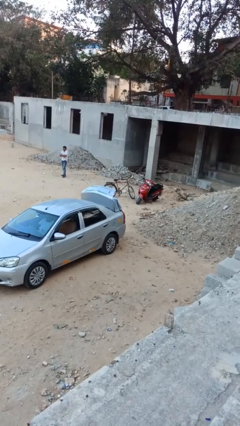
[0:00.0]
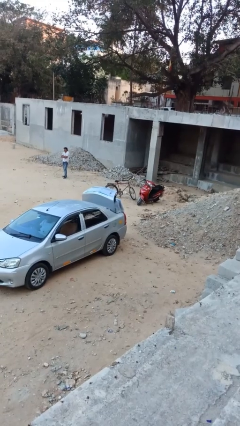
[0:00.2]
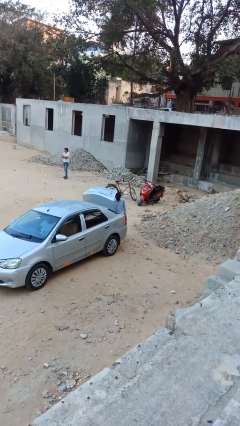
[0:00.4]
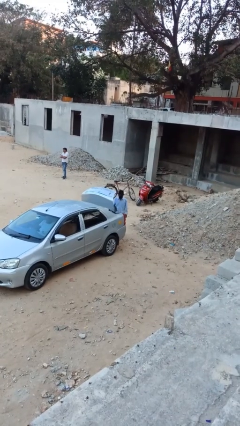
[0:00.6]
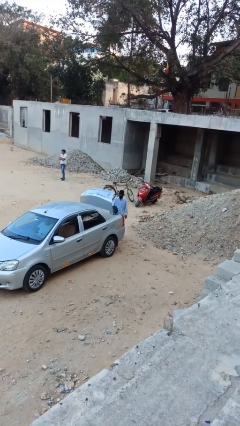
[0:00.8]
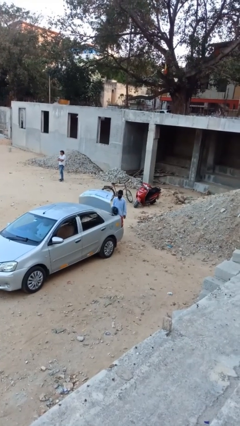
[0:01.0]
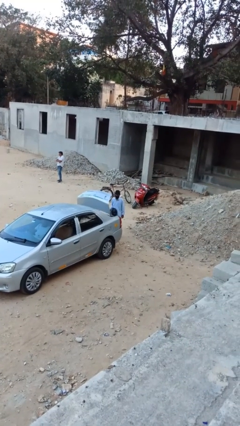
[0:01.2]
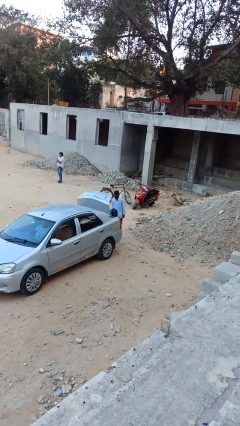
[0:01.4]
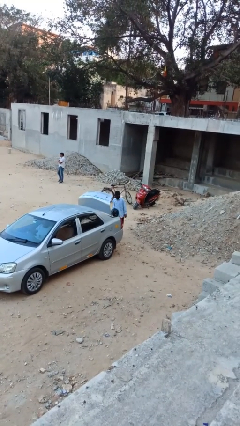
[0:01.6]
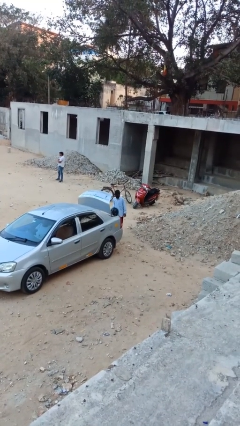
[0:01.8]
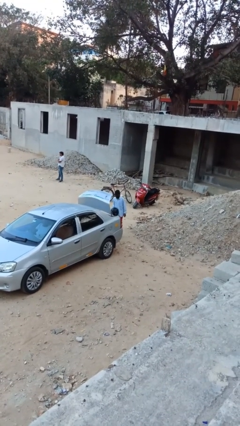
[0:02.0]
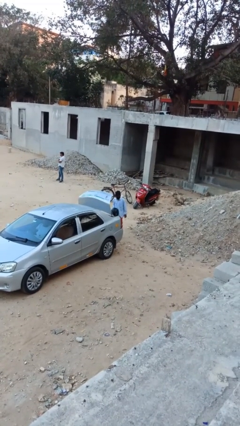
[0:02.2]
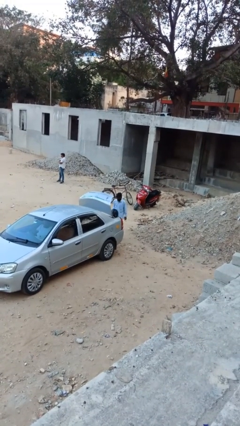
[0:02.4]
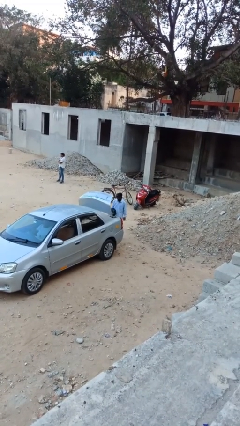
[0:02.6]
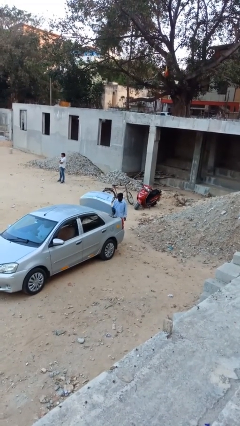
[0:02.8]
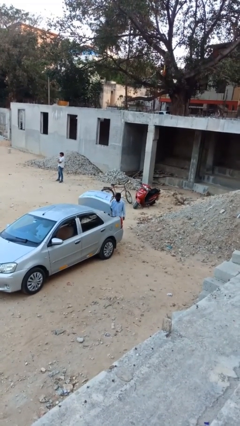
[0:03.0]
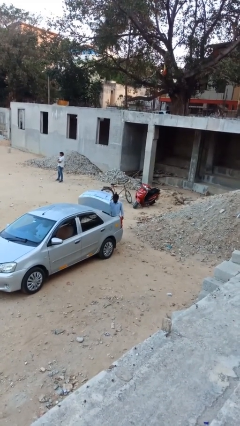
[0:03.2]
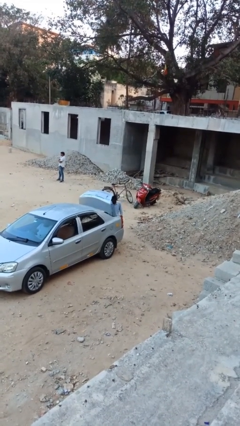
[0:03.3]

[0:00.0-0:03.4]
person unloads car

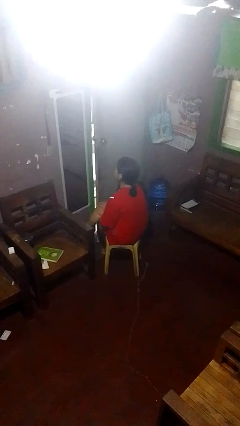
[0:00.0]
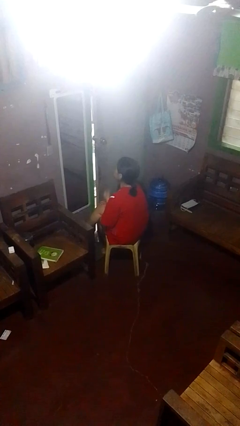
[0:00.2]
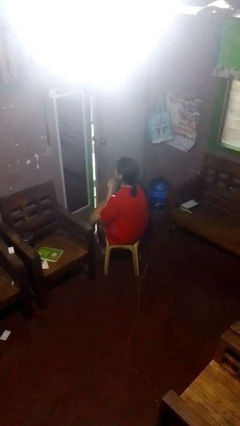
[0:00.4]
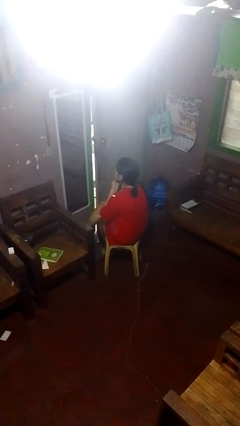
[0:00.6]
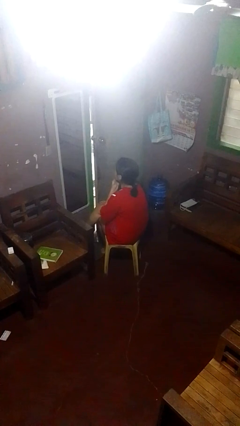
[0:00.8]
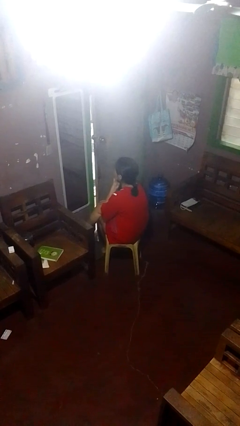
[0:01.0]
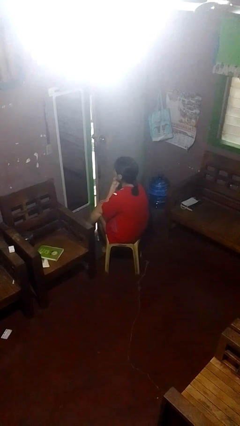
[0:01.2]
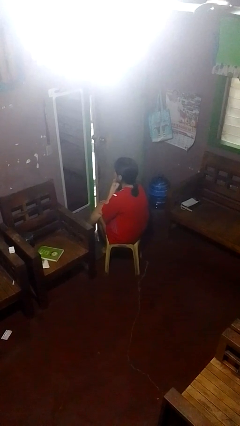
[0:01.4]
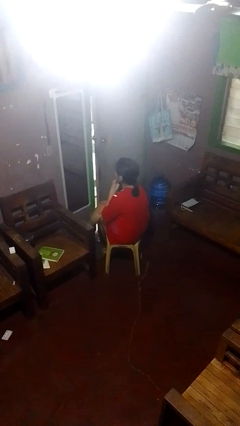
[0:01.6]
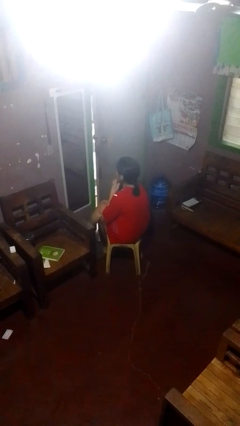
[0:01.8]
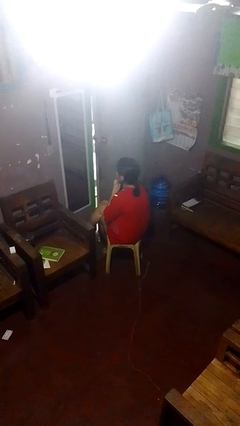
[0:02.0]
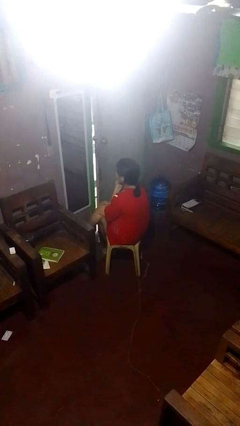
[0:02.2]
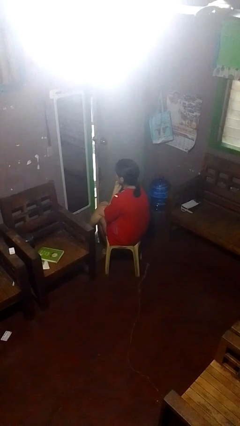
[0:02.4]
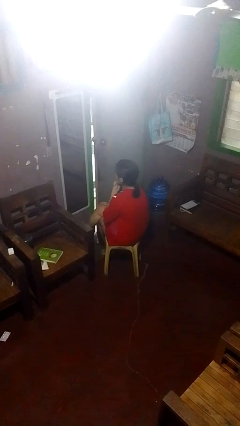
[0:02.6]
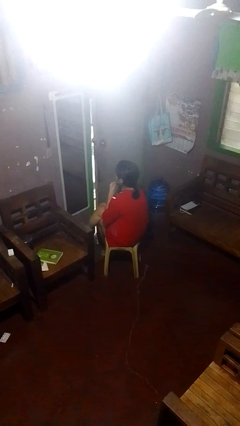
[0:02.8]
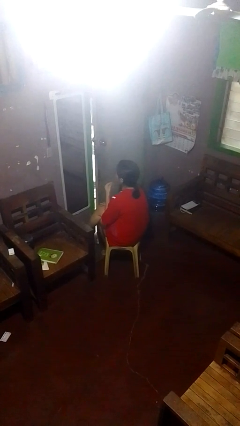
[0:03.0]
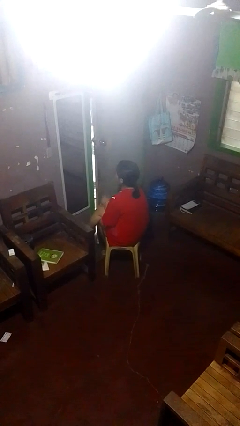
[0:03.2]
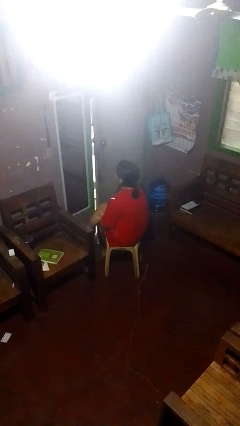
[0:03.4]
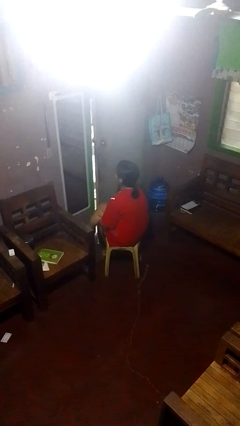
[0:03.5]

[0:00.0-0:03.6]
person strokes chin

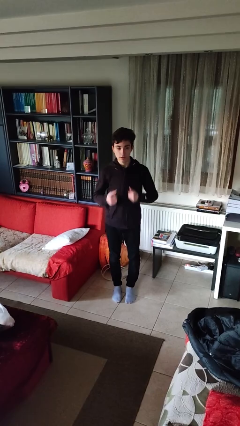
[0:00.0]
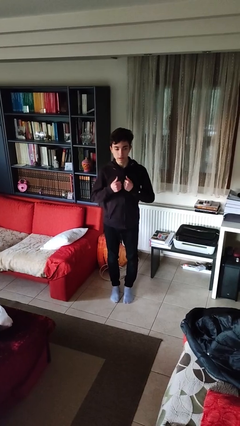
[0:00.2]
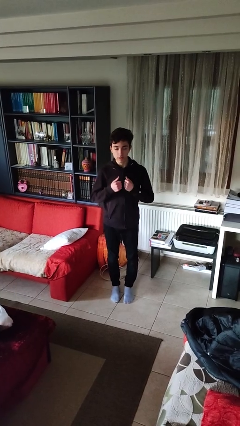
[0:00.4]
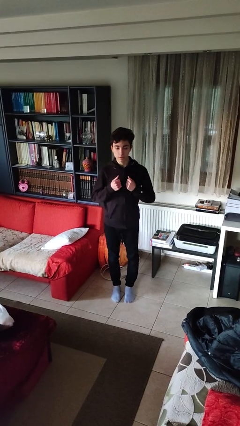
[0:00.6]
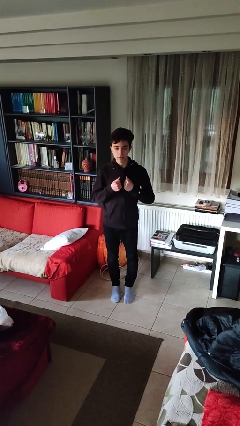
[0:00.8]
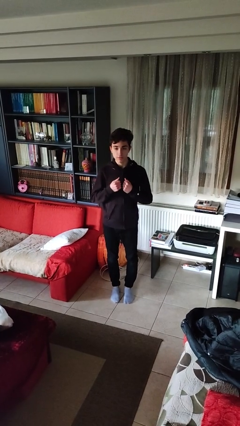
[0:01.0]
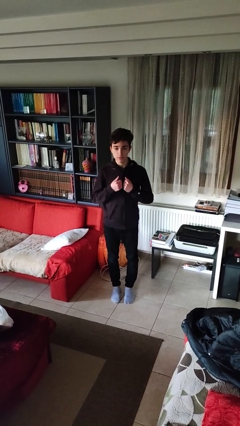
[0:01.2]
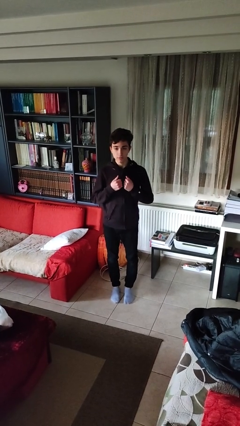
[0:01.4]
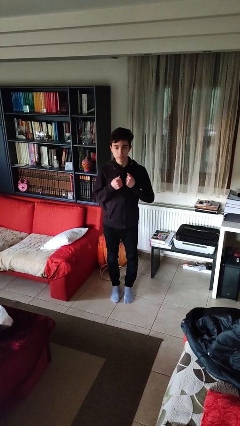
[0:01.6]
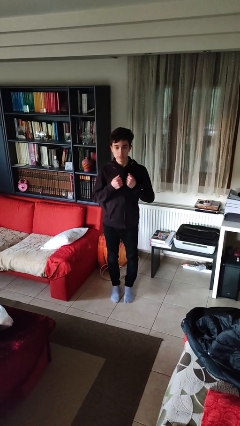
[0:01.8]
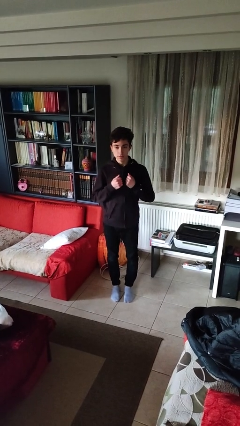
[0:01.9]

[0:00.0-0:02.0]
person drums on chest

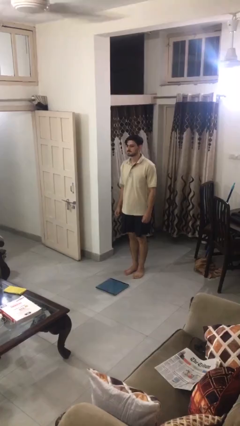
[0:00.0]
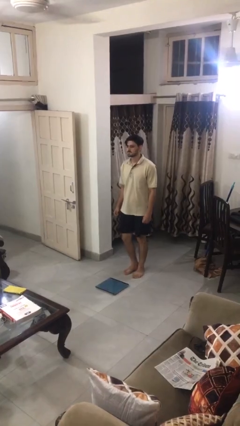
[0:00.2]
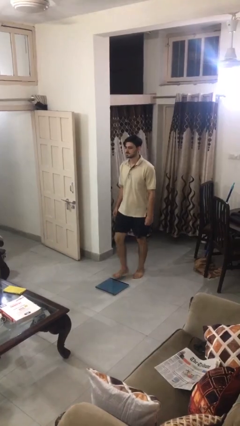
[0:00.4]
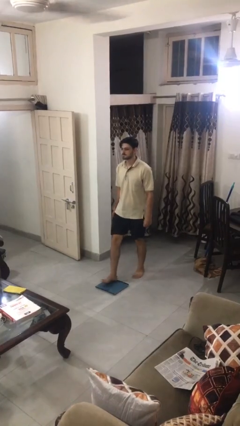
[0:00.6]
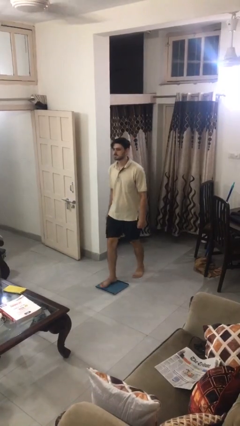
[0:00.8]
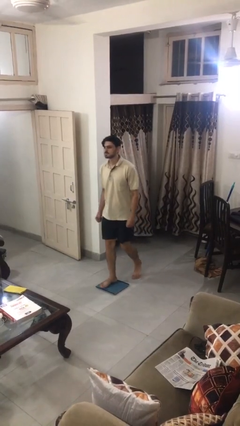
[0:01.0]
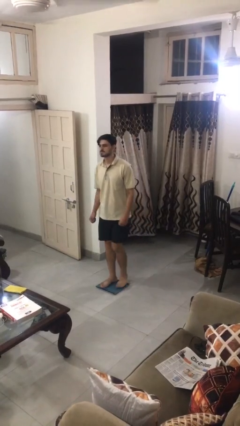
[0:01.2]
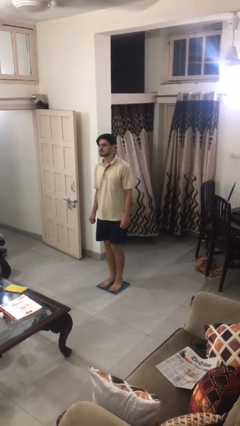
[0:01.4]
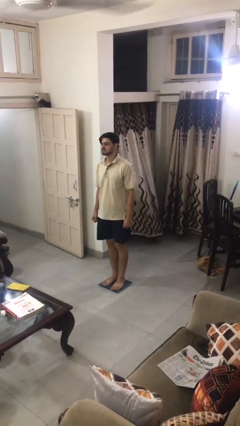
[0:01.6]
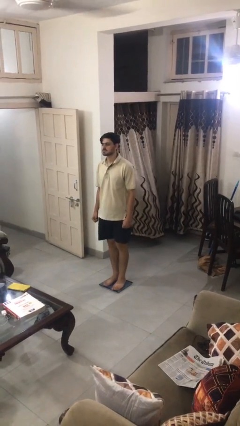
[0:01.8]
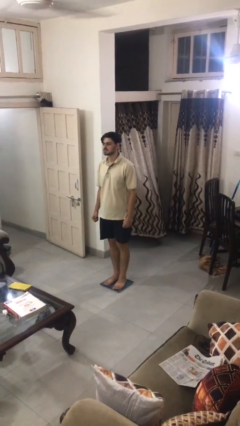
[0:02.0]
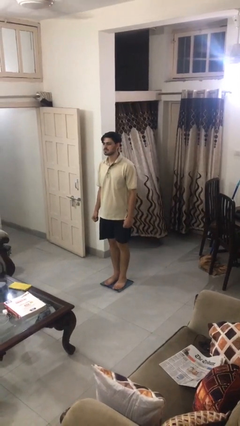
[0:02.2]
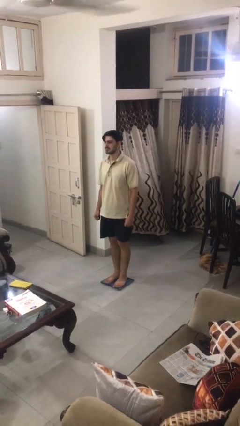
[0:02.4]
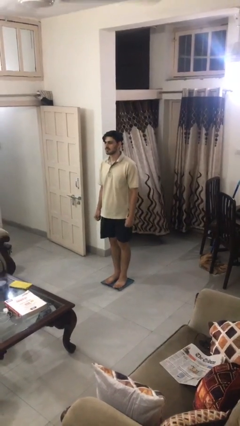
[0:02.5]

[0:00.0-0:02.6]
person uses bodyweight scale

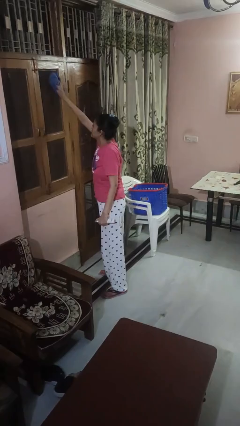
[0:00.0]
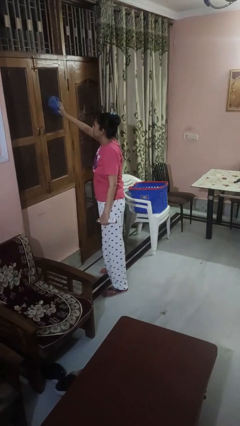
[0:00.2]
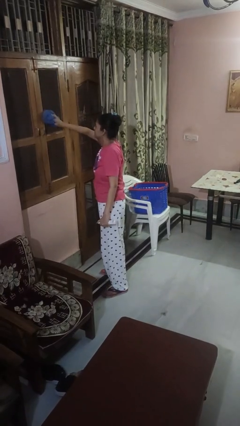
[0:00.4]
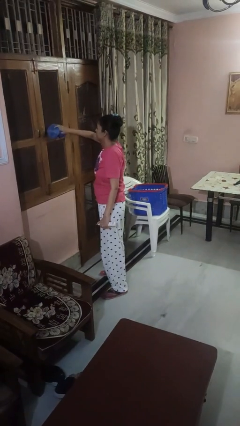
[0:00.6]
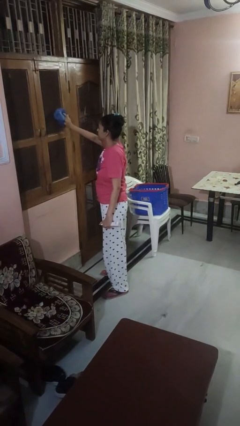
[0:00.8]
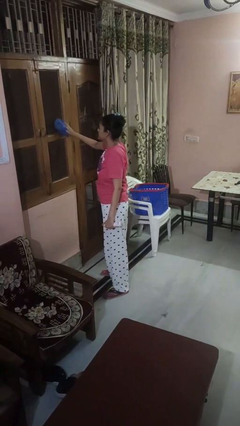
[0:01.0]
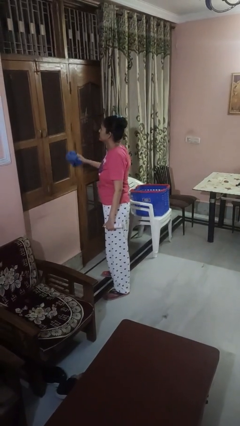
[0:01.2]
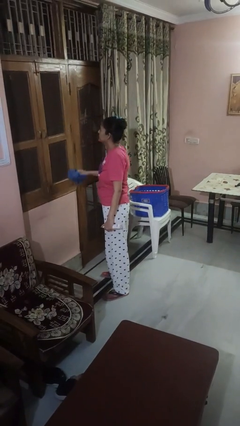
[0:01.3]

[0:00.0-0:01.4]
person washes window

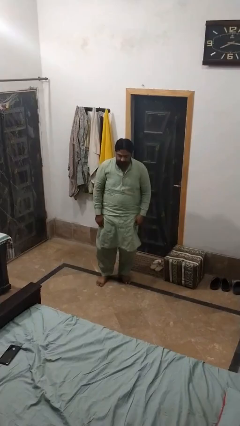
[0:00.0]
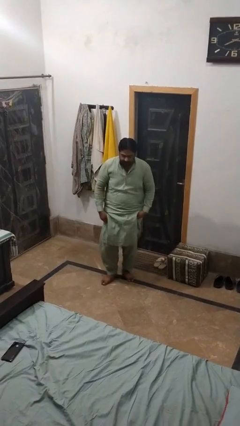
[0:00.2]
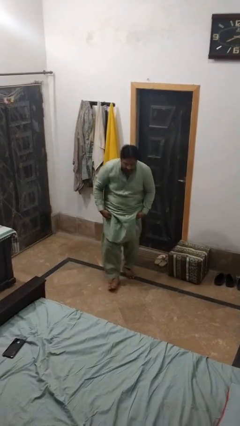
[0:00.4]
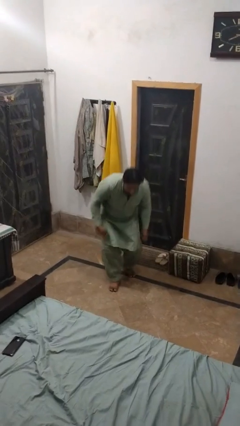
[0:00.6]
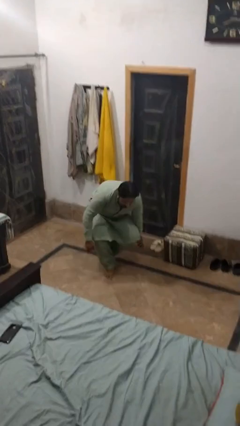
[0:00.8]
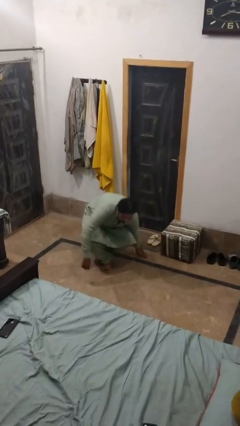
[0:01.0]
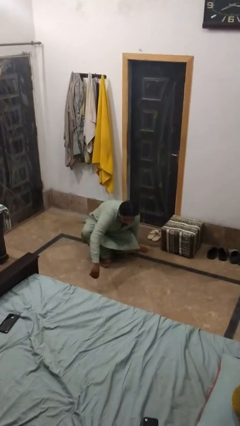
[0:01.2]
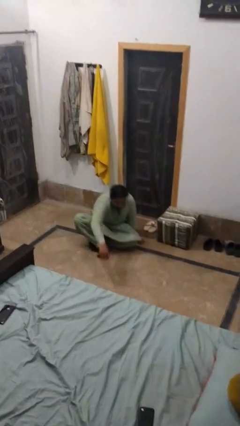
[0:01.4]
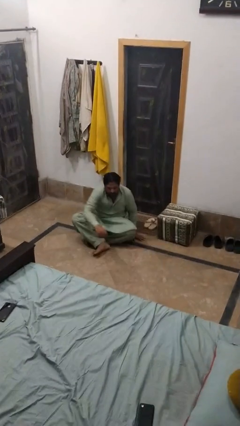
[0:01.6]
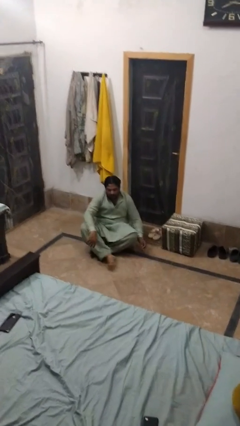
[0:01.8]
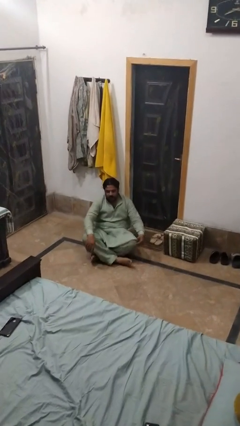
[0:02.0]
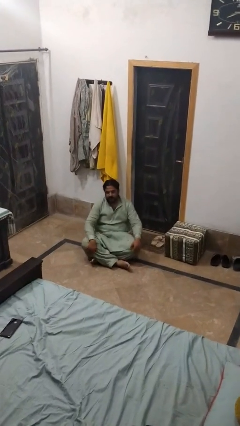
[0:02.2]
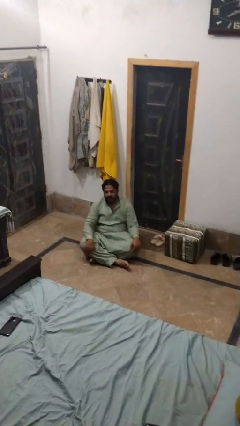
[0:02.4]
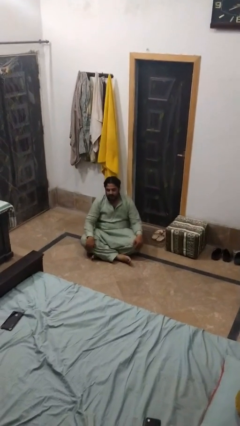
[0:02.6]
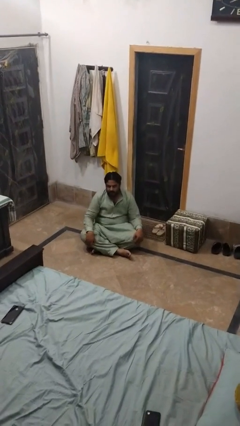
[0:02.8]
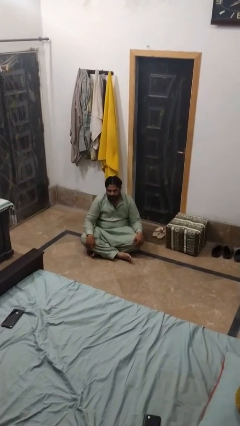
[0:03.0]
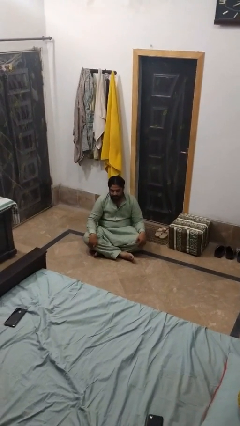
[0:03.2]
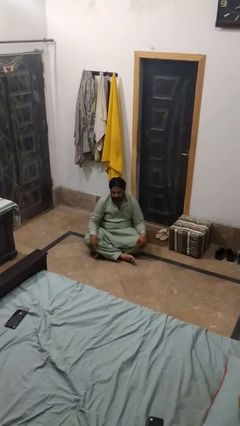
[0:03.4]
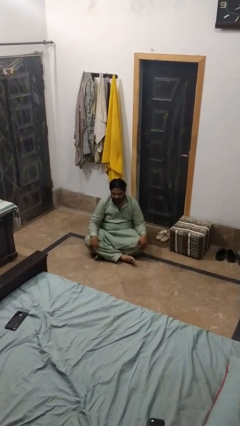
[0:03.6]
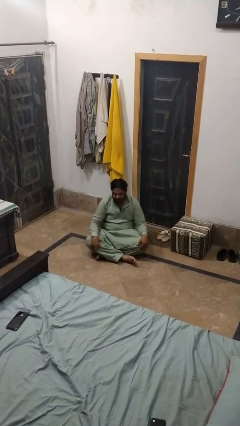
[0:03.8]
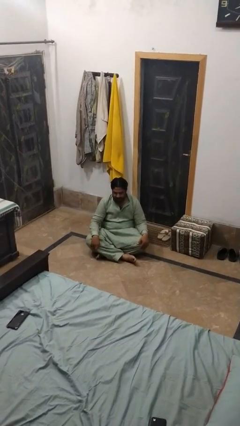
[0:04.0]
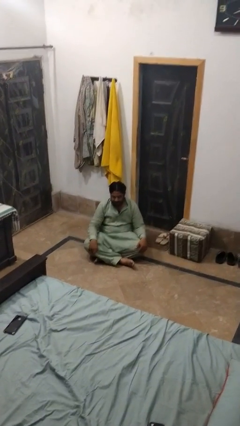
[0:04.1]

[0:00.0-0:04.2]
person sits crisscross
